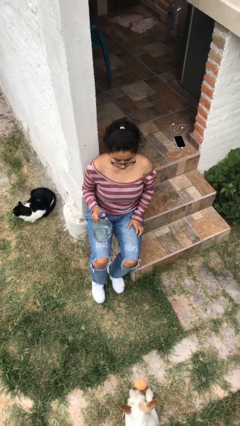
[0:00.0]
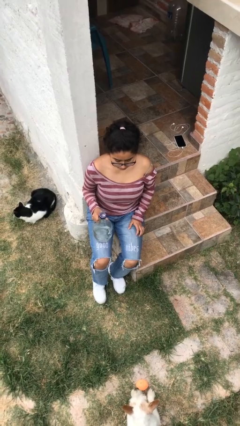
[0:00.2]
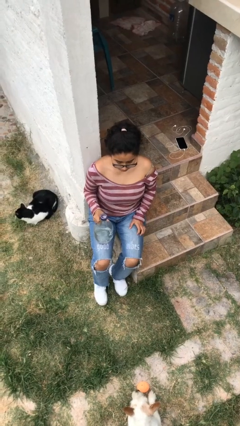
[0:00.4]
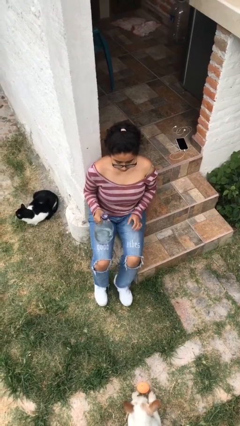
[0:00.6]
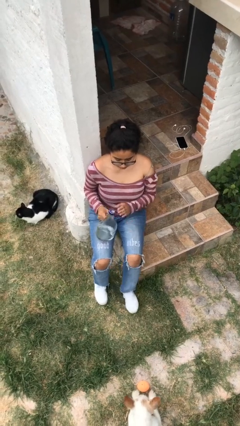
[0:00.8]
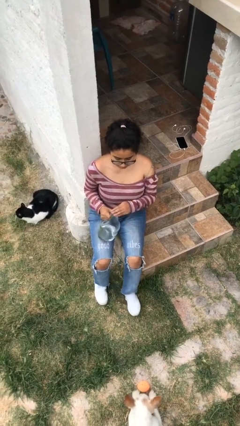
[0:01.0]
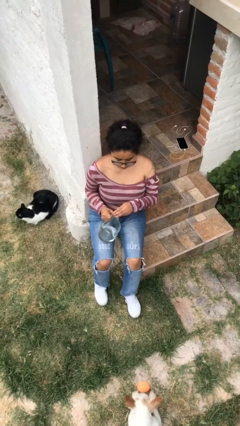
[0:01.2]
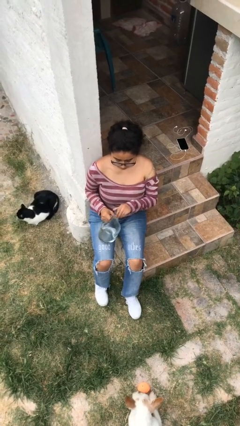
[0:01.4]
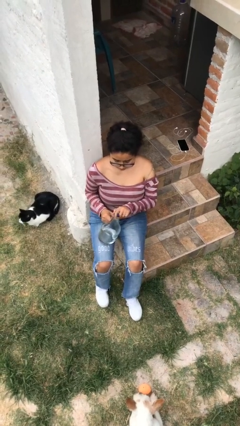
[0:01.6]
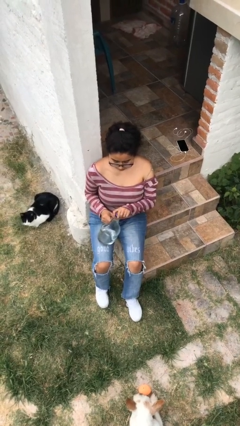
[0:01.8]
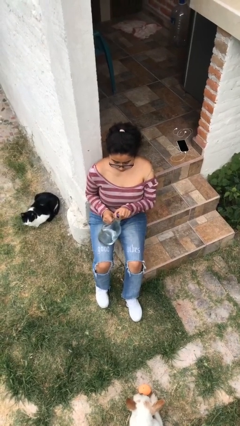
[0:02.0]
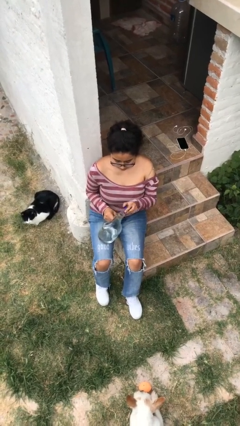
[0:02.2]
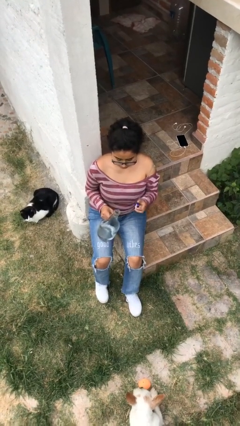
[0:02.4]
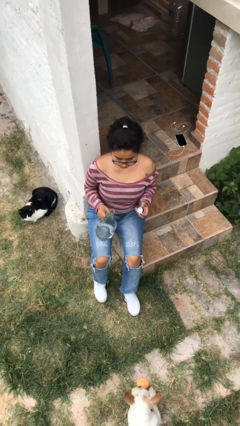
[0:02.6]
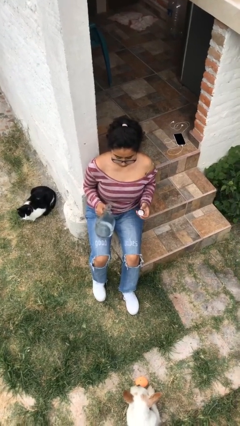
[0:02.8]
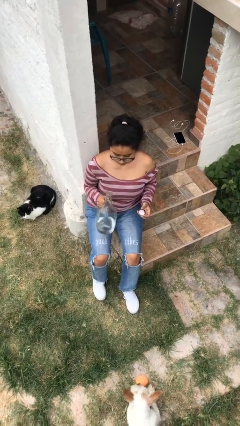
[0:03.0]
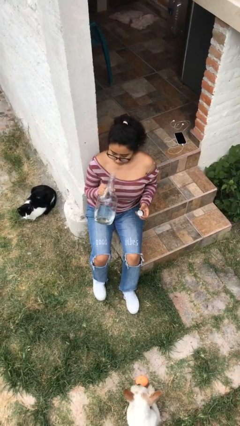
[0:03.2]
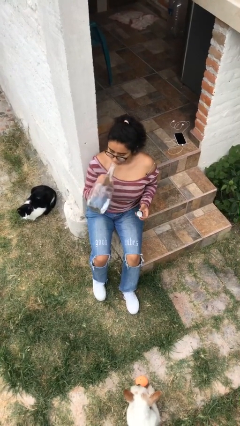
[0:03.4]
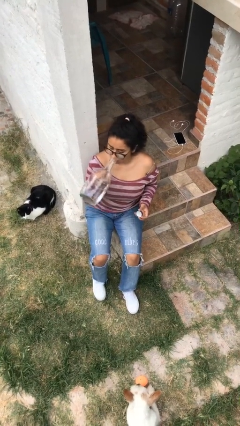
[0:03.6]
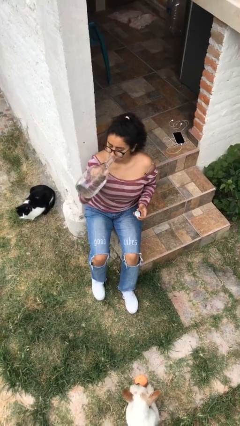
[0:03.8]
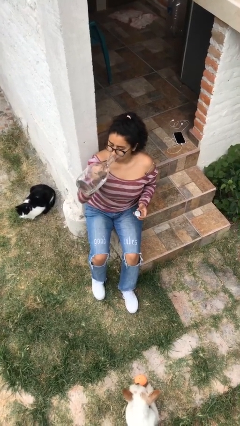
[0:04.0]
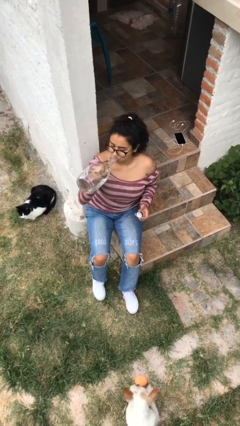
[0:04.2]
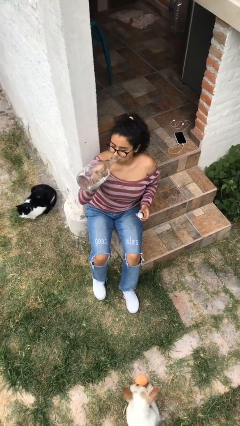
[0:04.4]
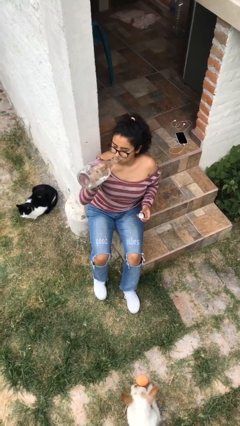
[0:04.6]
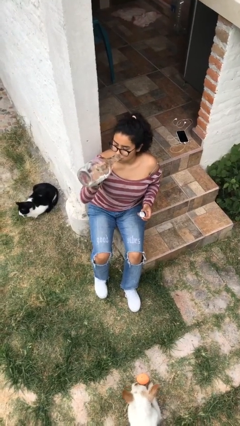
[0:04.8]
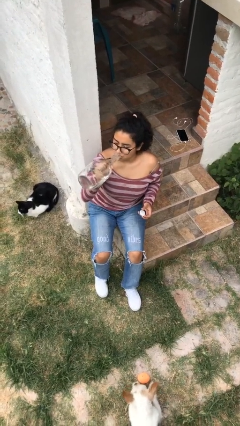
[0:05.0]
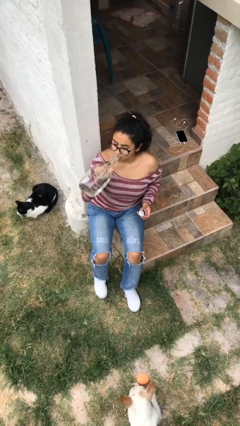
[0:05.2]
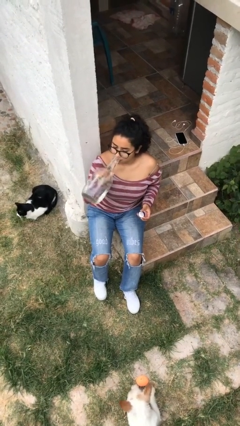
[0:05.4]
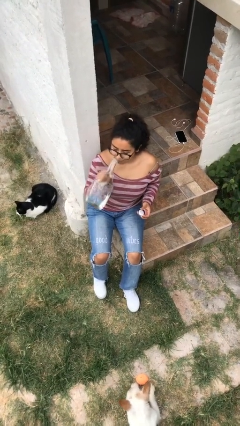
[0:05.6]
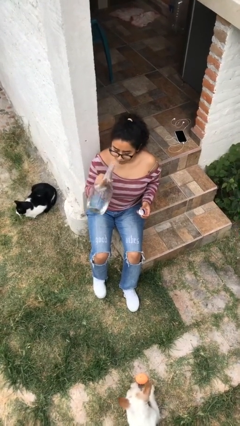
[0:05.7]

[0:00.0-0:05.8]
person drinks from bottle

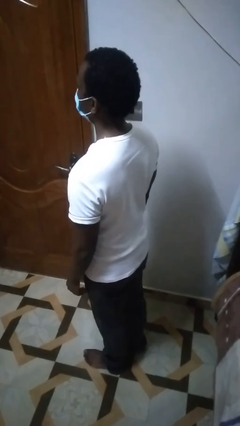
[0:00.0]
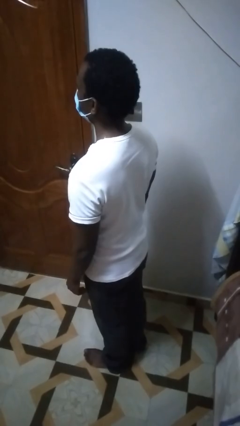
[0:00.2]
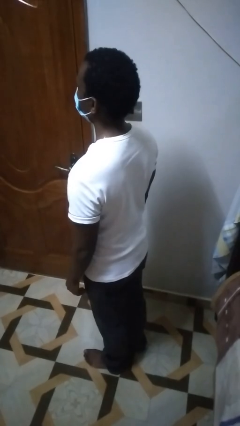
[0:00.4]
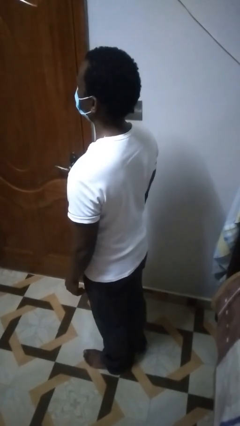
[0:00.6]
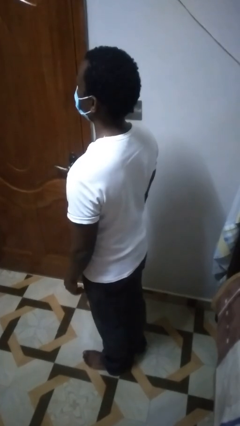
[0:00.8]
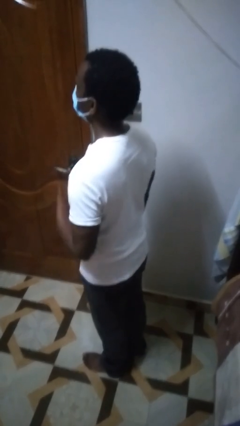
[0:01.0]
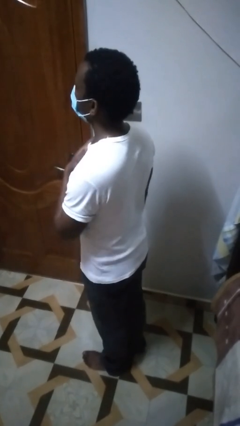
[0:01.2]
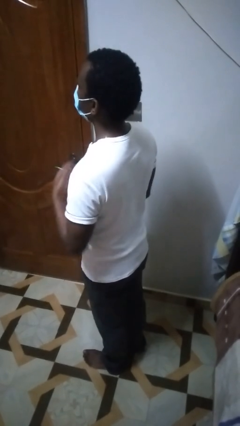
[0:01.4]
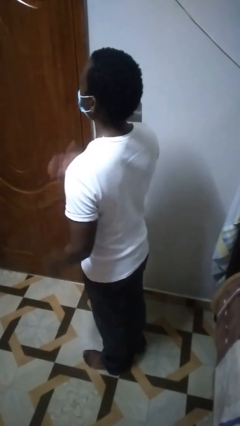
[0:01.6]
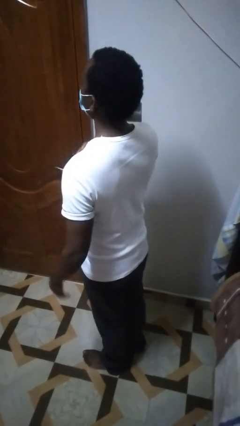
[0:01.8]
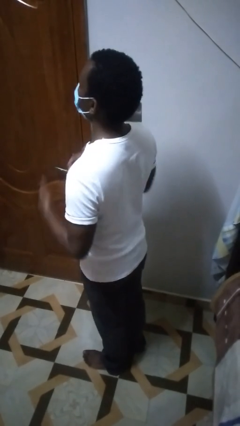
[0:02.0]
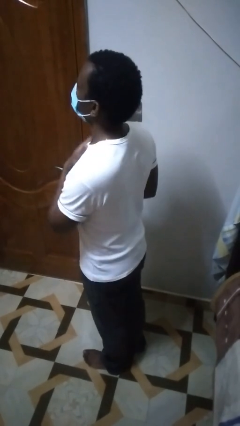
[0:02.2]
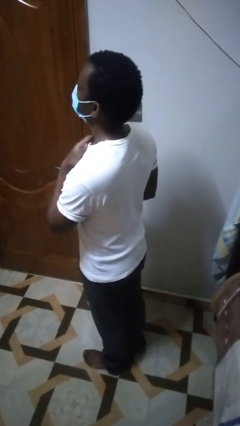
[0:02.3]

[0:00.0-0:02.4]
person drums on chest

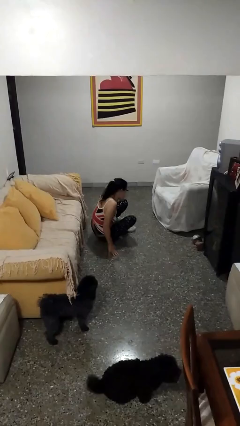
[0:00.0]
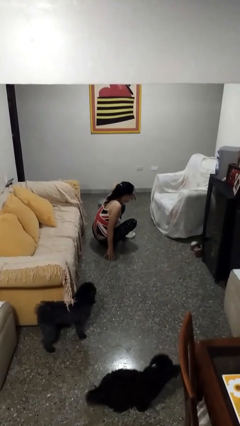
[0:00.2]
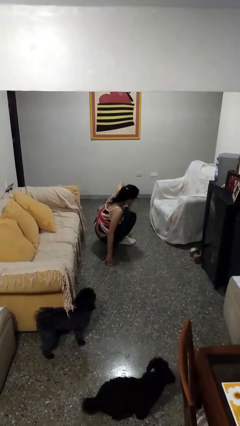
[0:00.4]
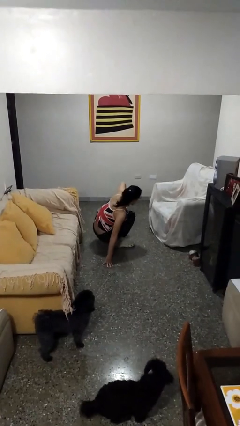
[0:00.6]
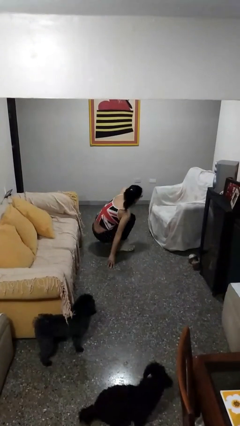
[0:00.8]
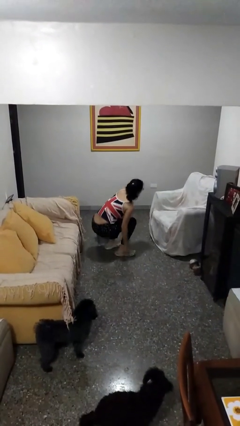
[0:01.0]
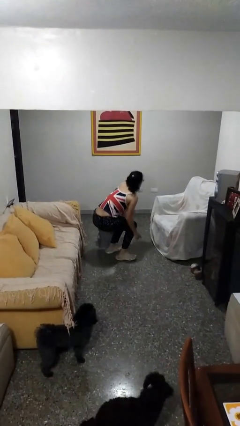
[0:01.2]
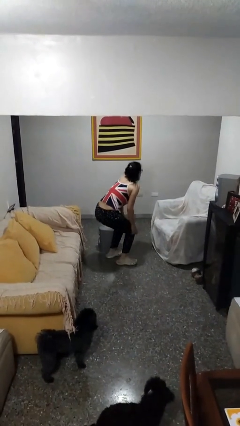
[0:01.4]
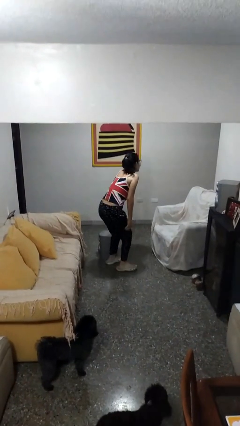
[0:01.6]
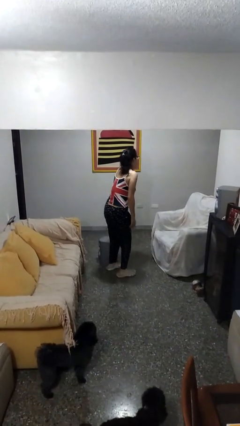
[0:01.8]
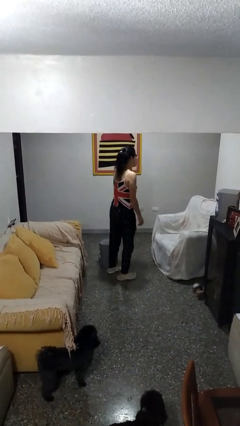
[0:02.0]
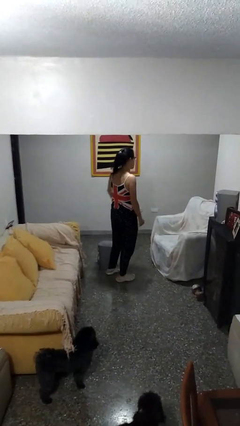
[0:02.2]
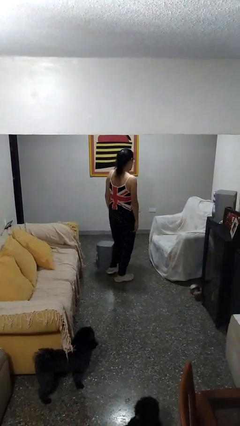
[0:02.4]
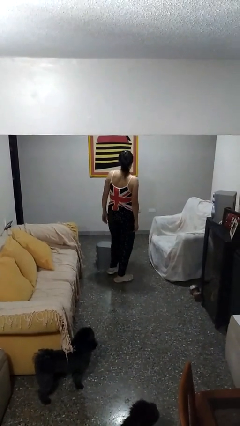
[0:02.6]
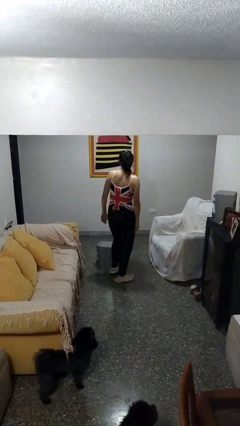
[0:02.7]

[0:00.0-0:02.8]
person stands up from floor

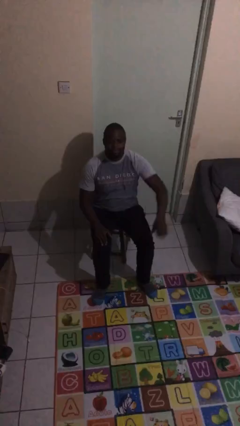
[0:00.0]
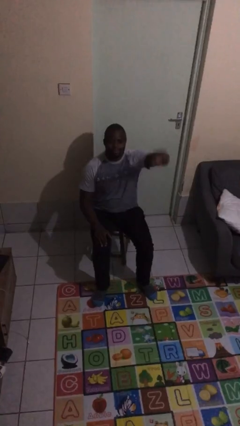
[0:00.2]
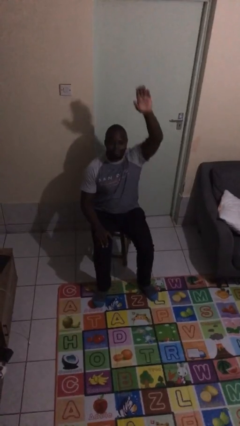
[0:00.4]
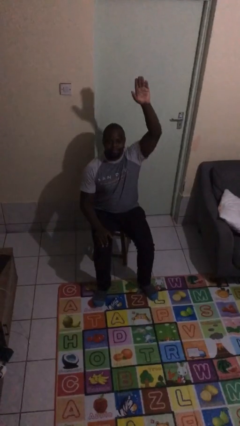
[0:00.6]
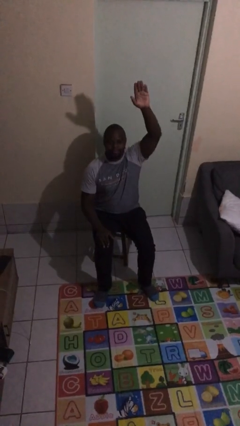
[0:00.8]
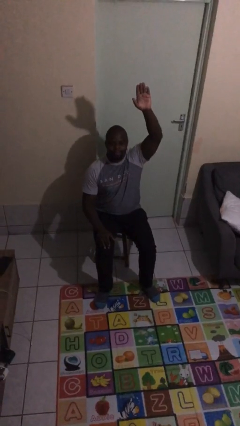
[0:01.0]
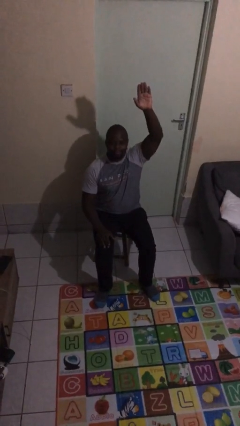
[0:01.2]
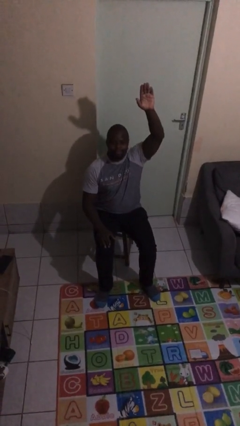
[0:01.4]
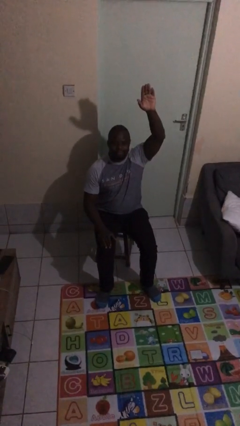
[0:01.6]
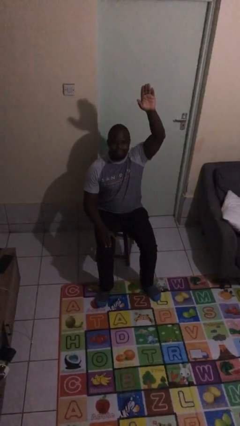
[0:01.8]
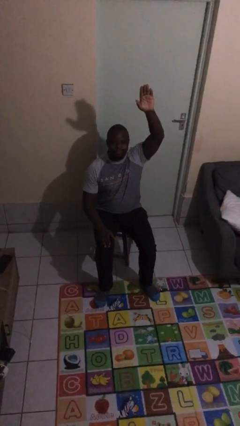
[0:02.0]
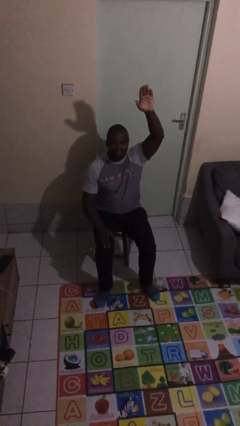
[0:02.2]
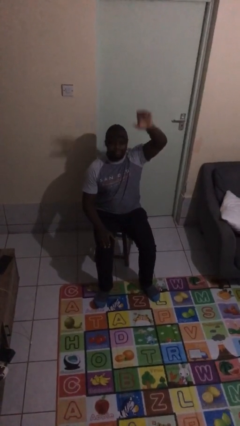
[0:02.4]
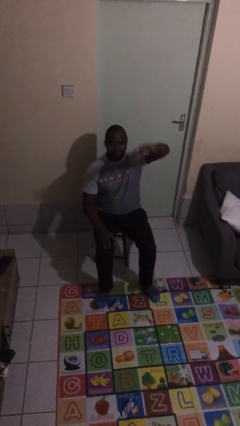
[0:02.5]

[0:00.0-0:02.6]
person gestures raise hand

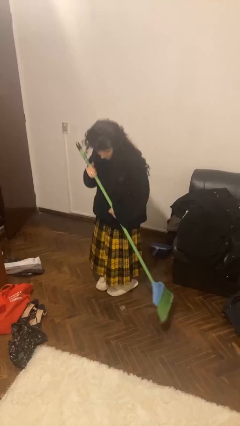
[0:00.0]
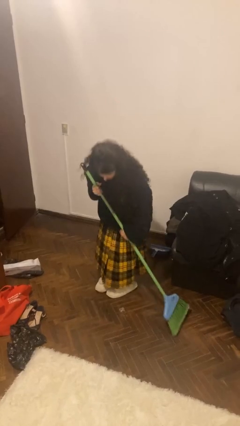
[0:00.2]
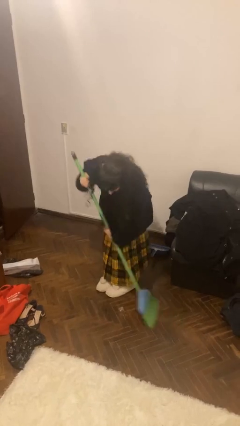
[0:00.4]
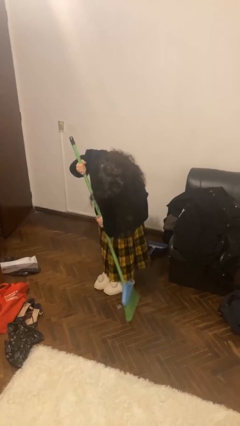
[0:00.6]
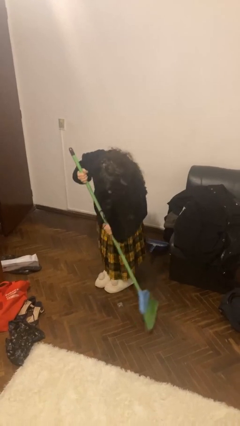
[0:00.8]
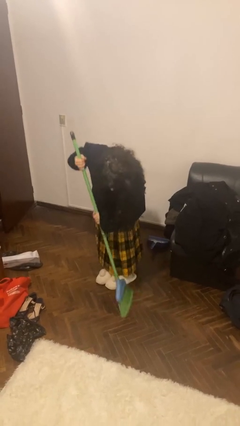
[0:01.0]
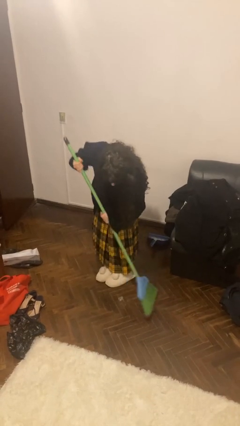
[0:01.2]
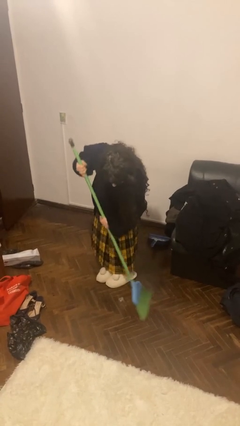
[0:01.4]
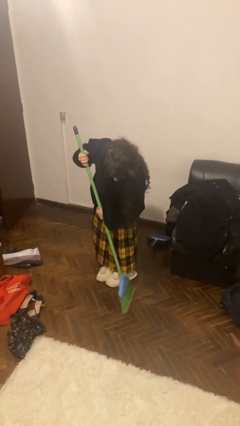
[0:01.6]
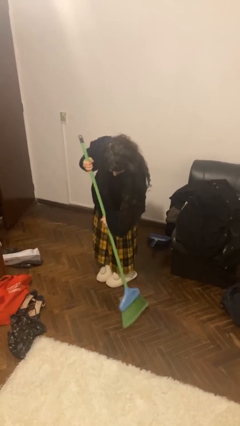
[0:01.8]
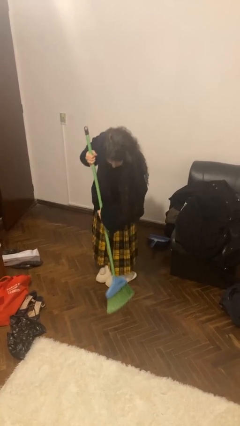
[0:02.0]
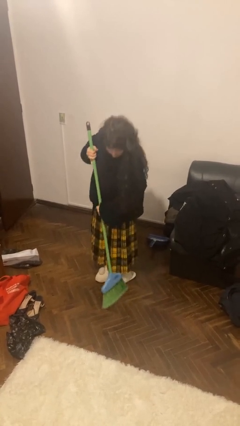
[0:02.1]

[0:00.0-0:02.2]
person sweeps floor

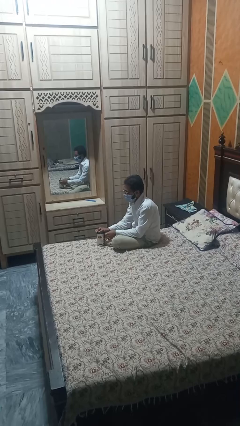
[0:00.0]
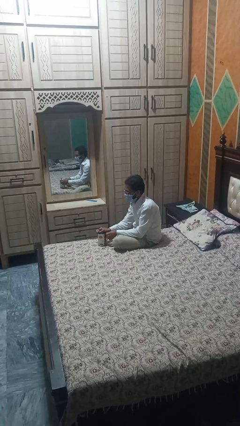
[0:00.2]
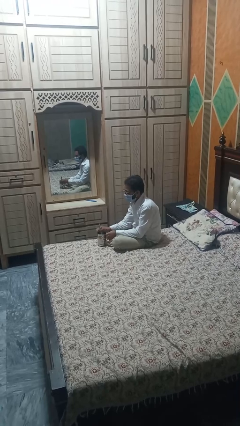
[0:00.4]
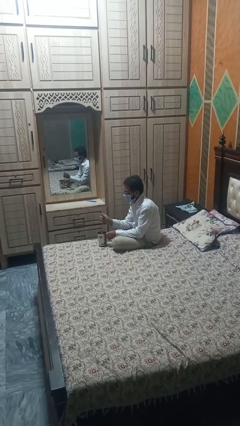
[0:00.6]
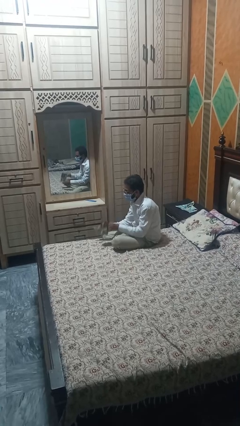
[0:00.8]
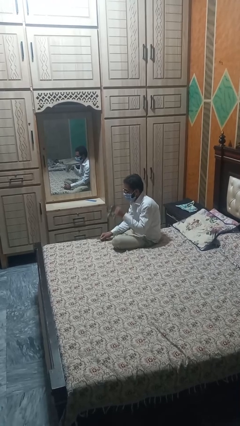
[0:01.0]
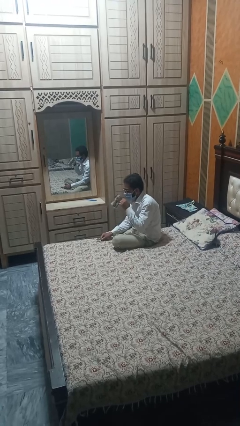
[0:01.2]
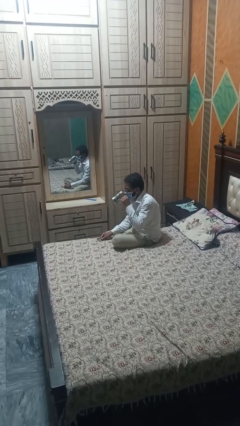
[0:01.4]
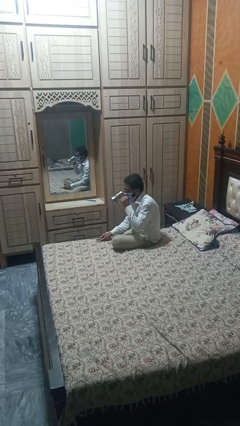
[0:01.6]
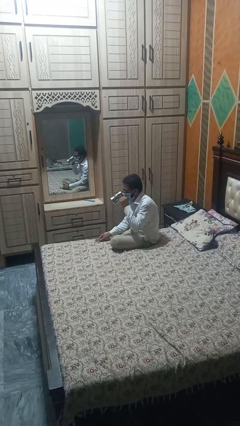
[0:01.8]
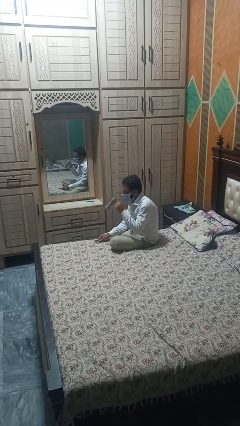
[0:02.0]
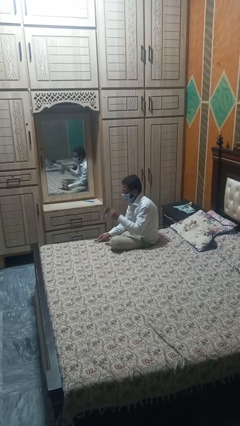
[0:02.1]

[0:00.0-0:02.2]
person drinks from mug
